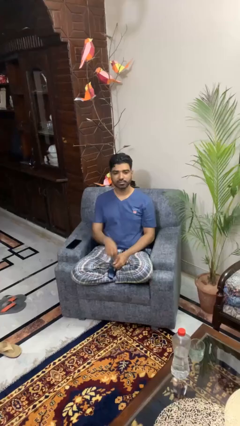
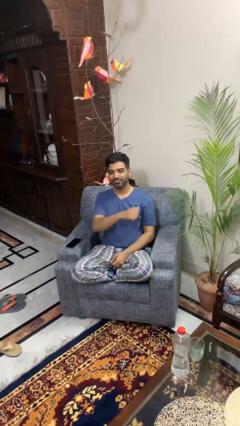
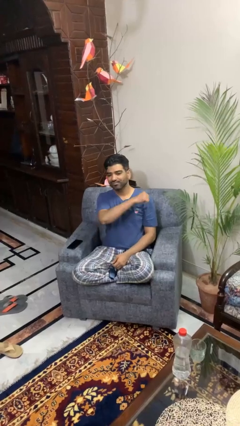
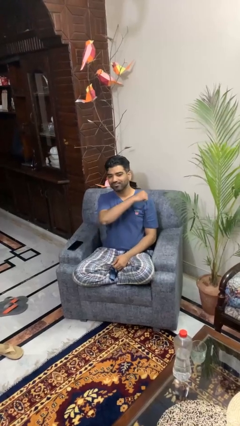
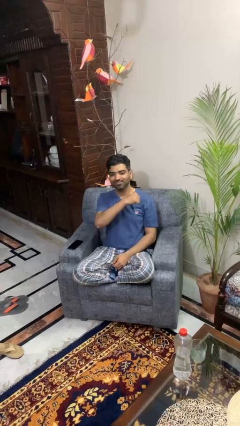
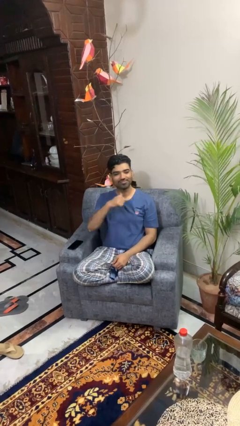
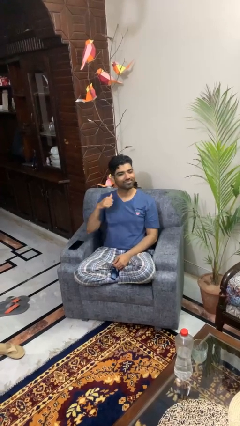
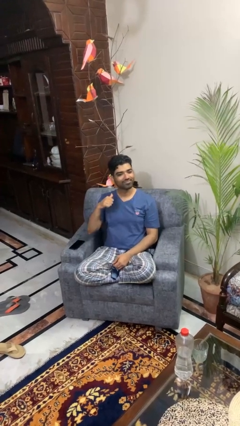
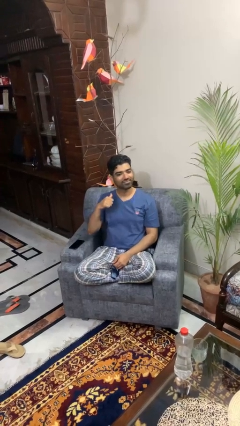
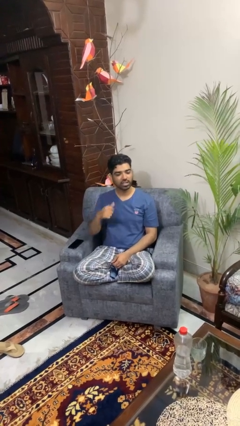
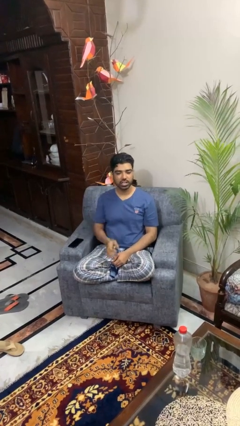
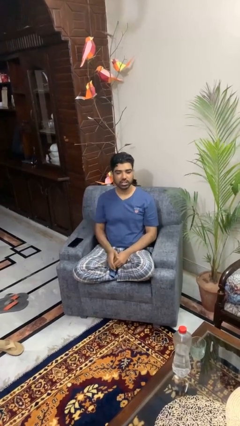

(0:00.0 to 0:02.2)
person gestures cut

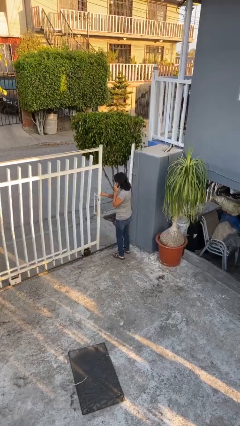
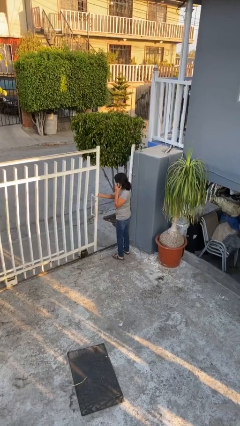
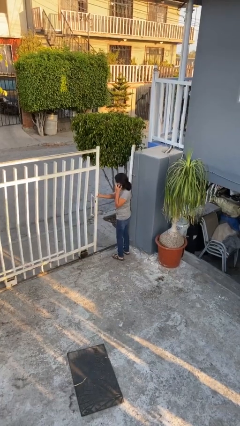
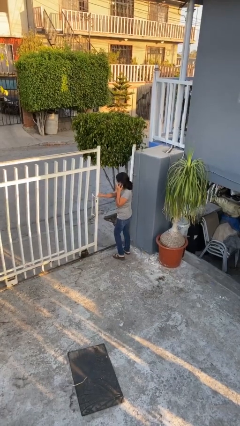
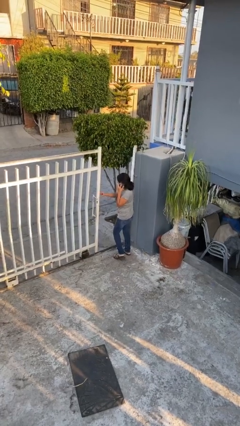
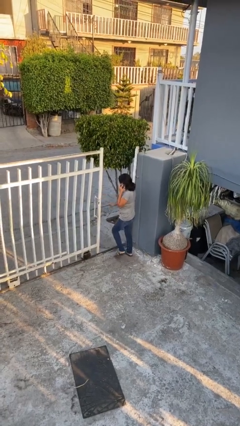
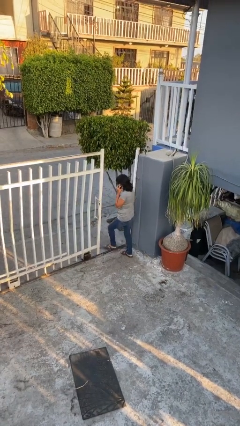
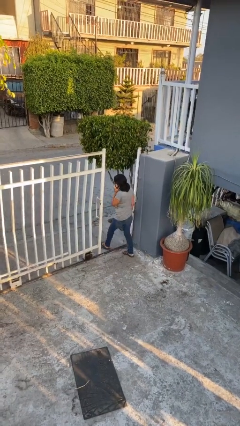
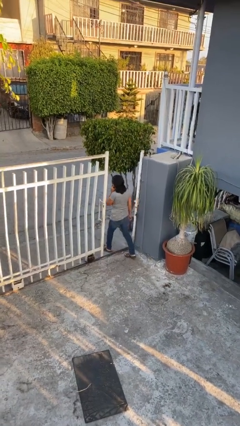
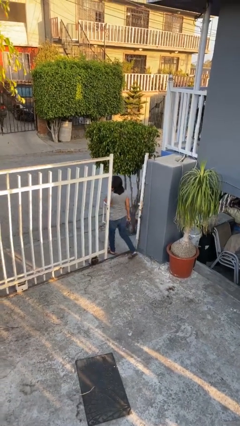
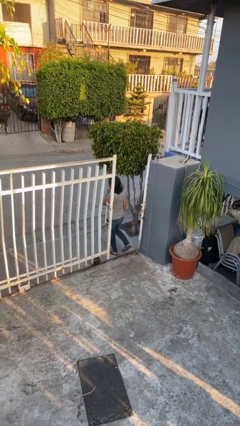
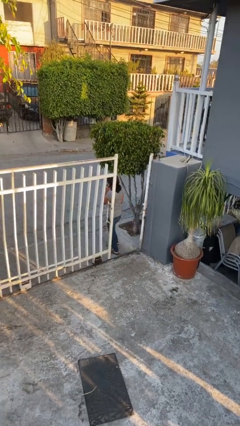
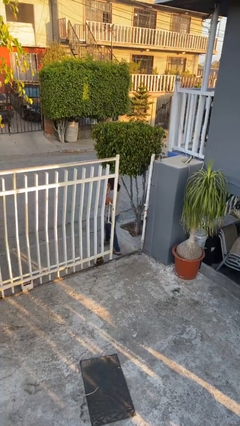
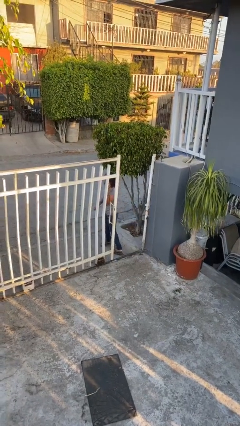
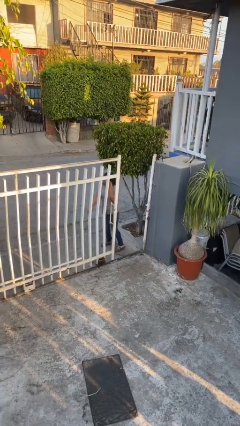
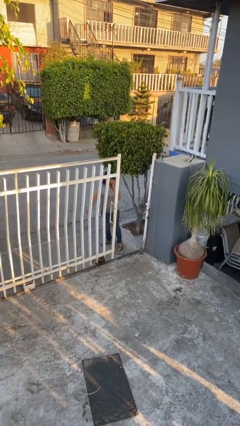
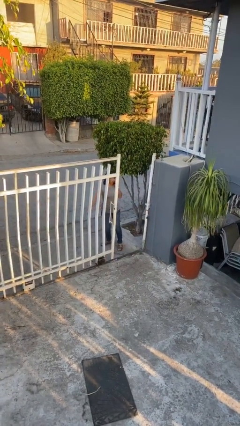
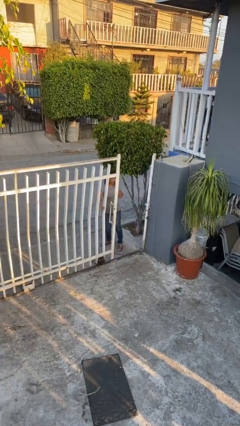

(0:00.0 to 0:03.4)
person exits scene through structure

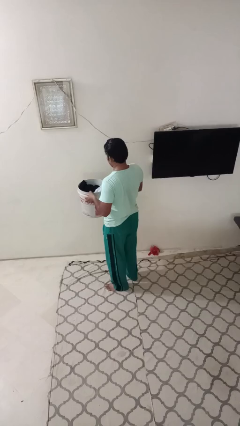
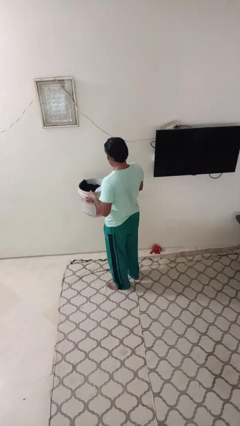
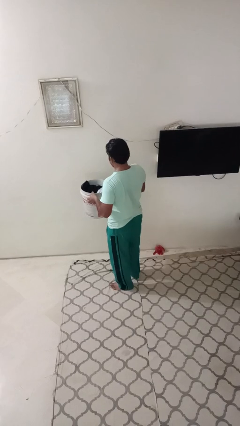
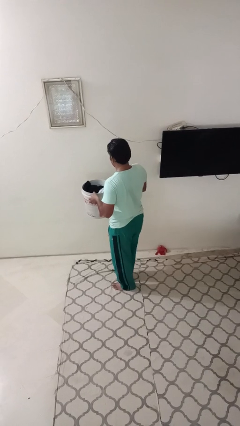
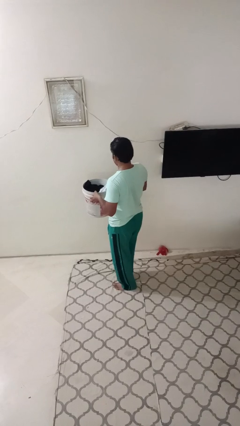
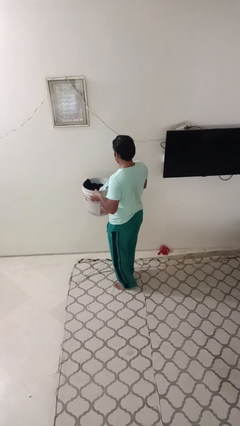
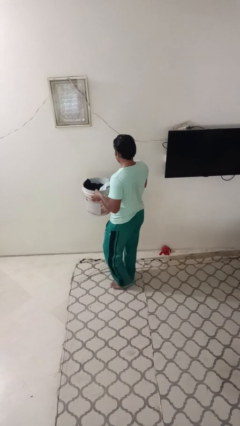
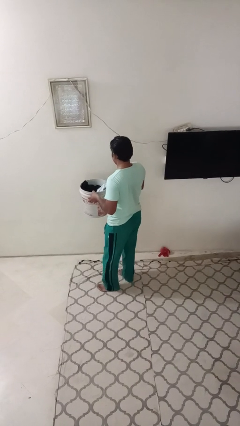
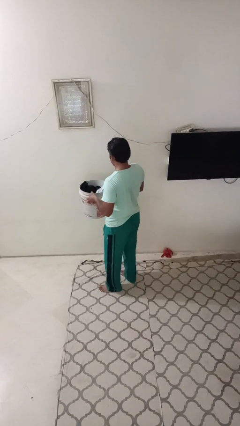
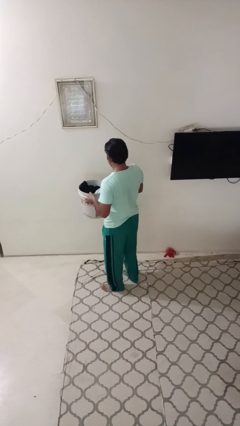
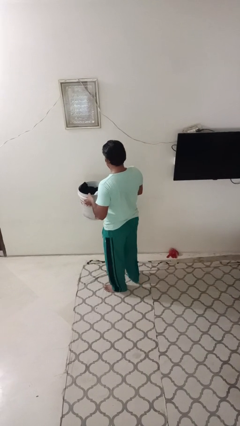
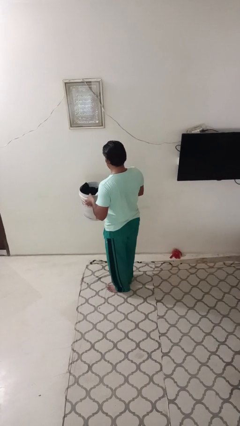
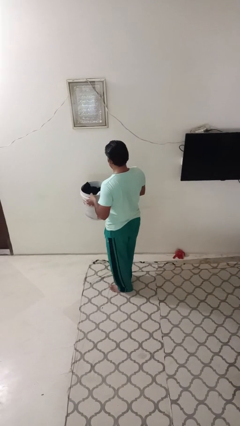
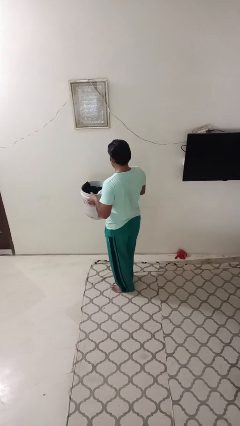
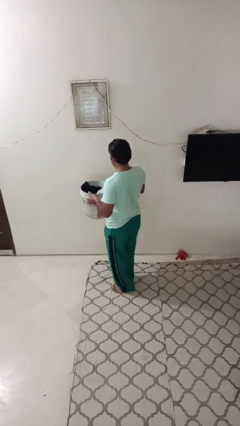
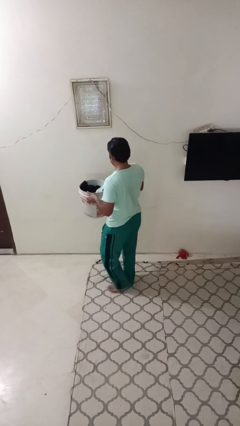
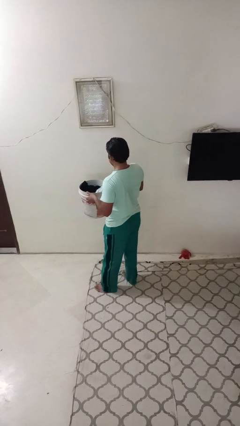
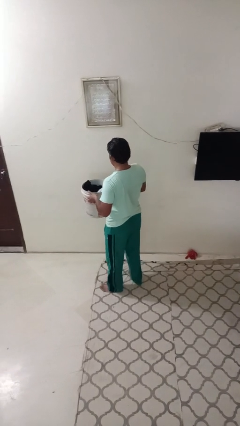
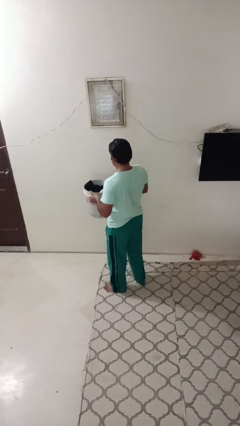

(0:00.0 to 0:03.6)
person carries laundry basket

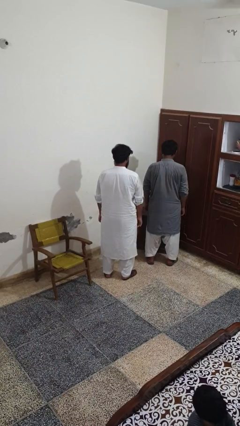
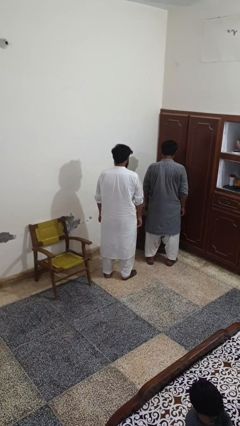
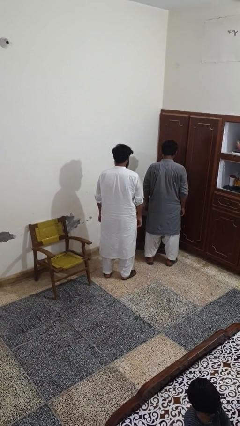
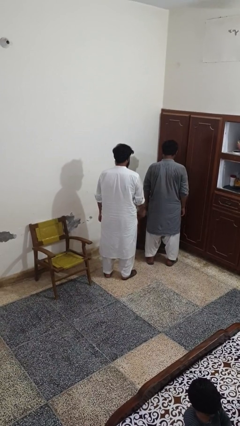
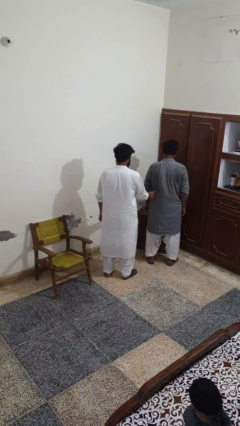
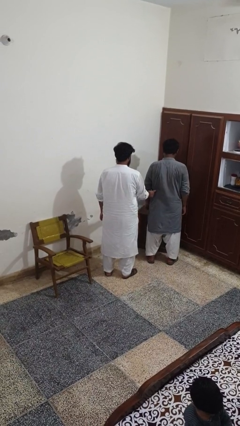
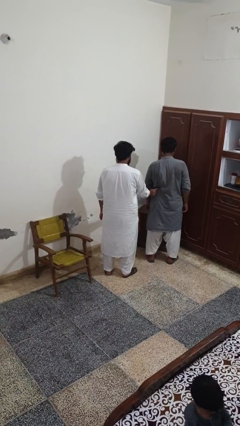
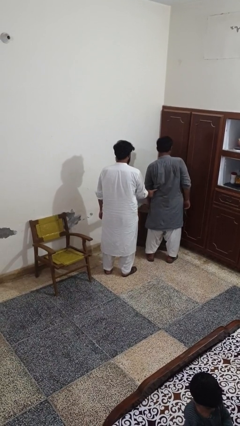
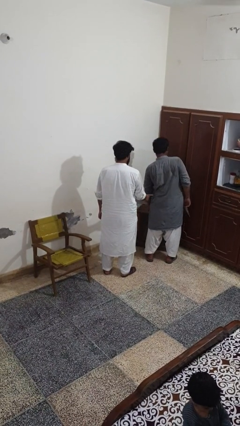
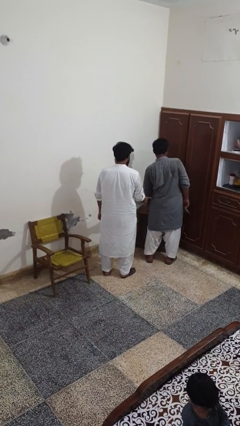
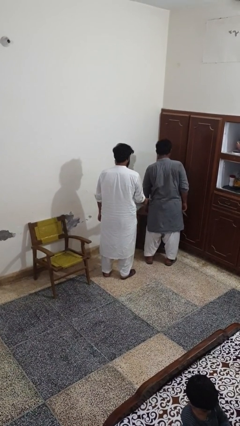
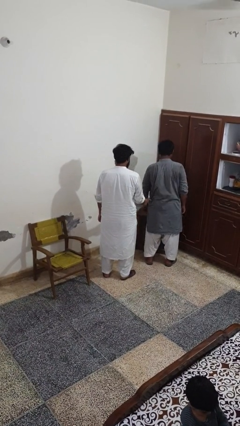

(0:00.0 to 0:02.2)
person tickles person

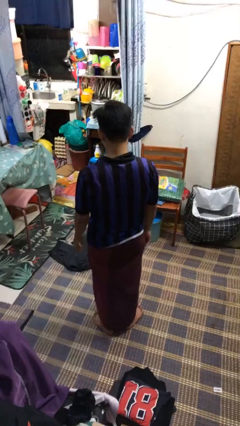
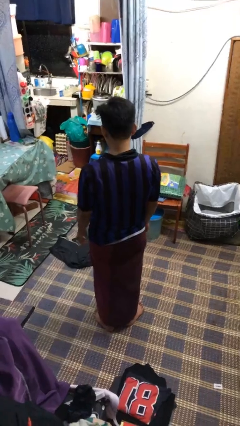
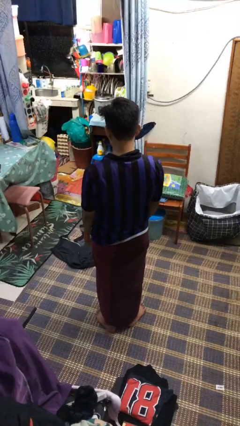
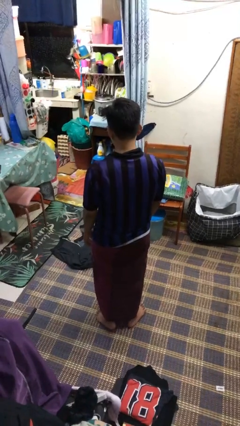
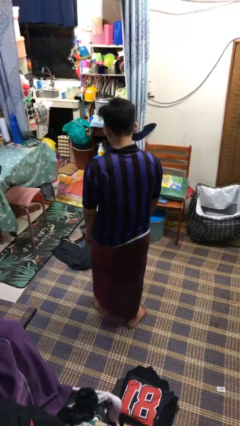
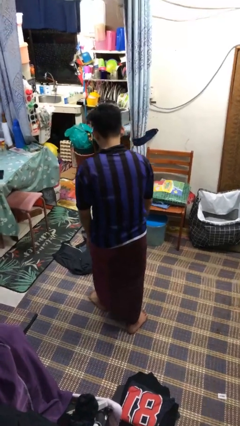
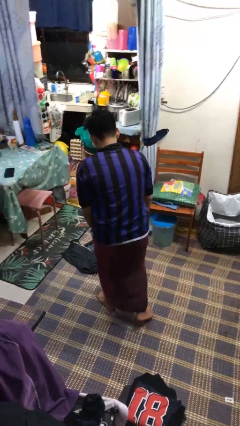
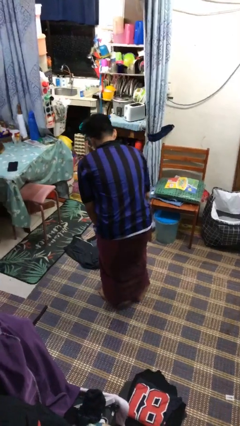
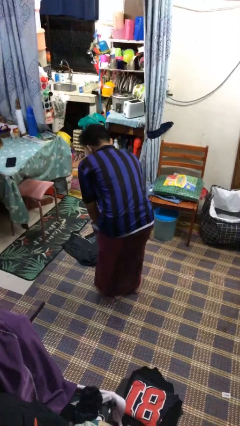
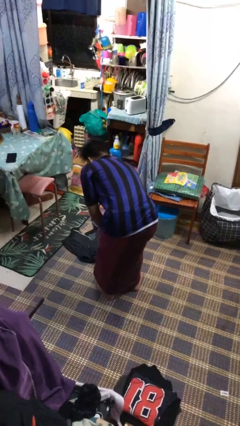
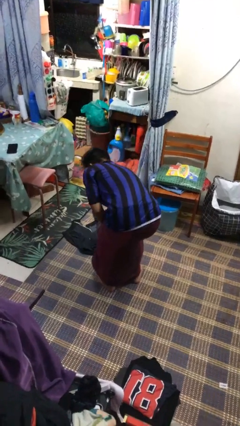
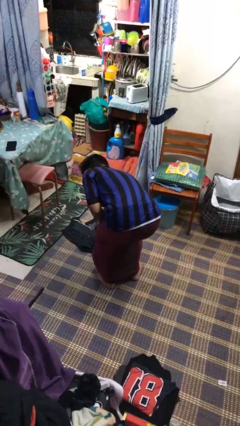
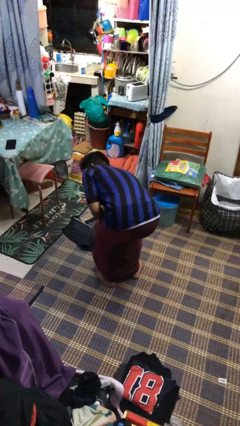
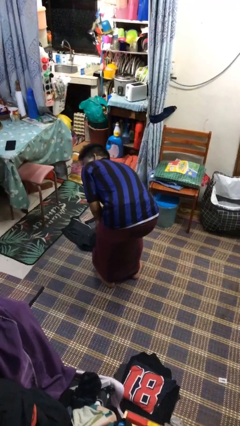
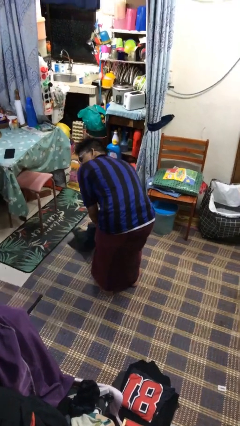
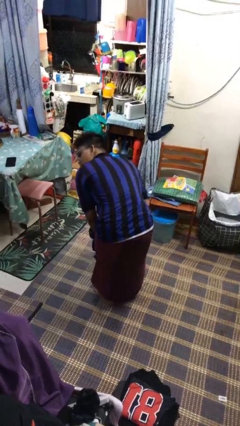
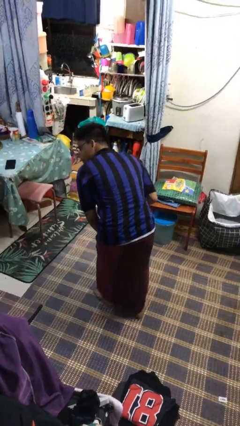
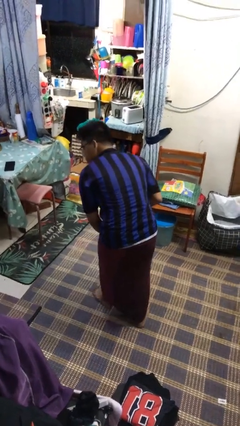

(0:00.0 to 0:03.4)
person picks up object from floor

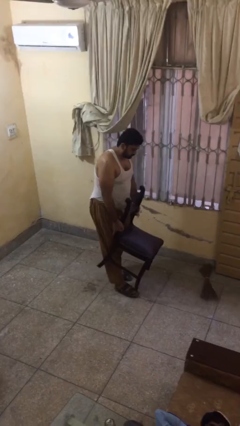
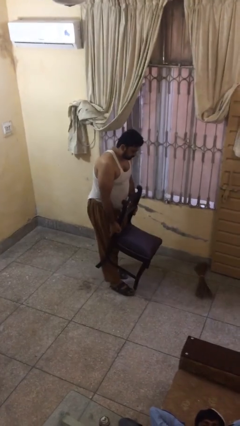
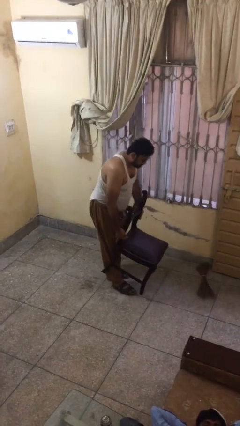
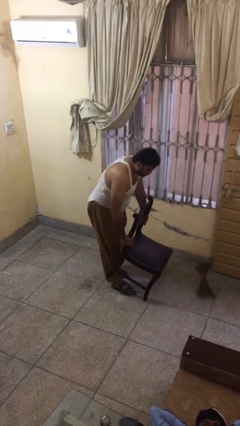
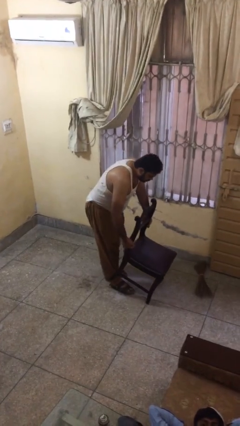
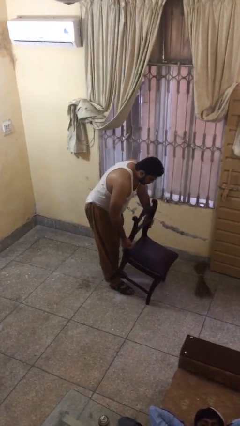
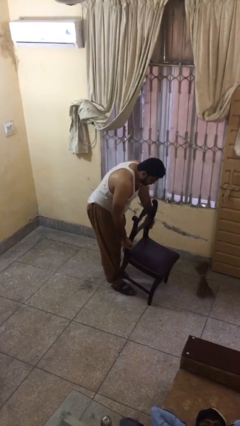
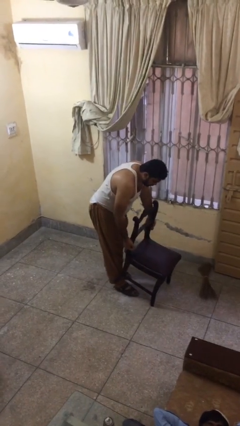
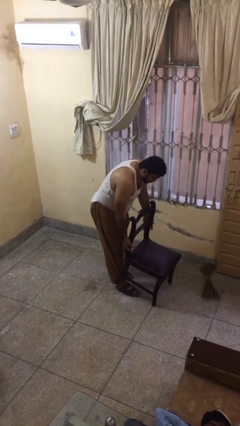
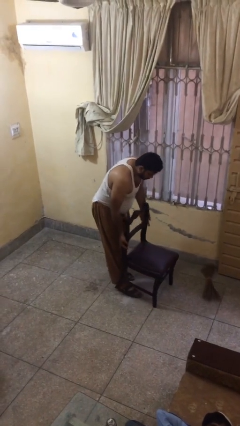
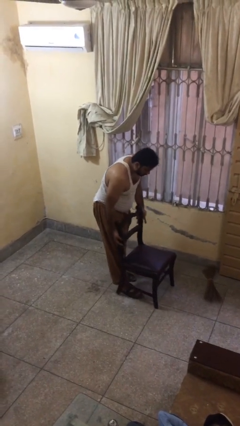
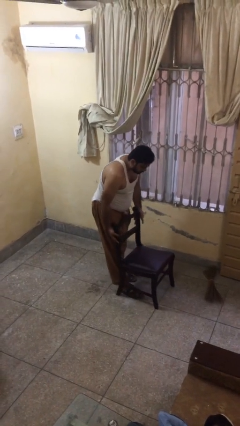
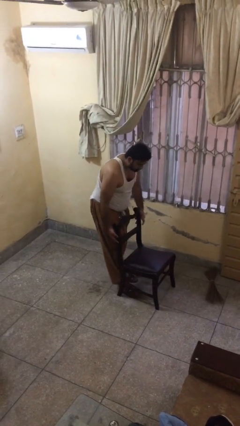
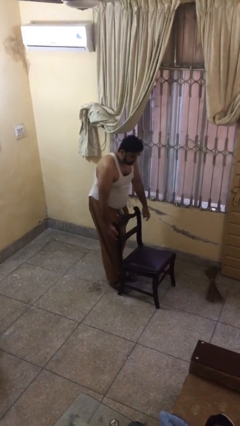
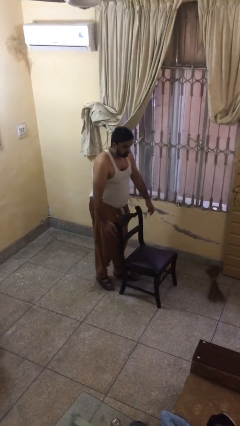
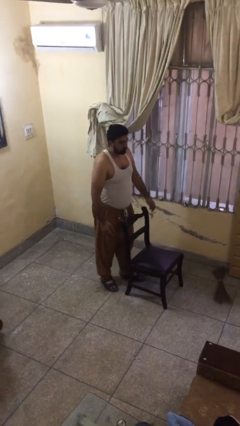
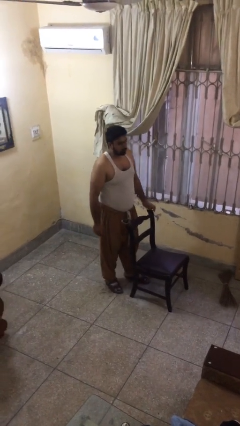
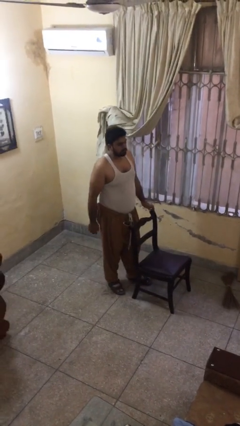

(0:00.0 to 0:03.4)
person puts down object on floor
